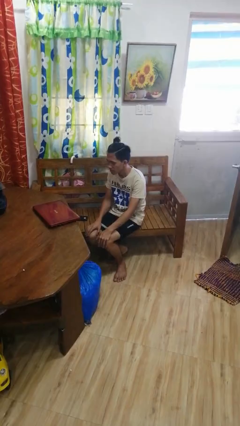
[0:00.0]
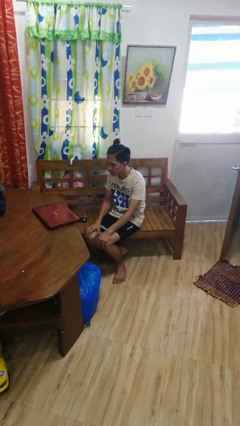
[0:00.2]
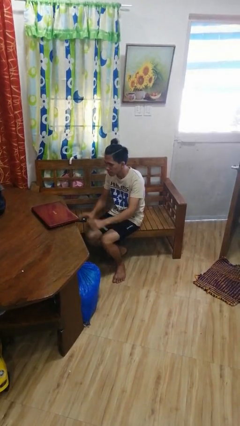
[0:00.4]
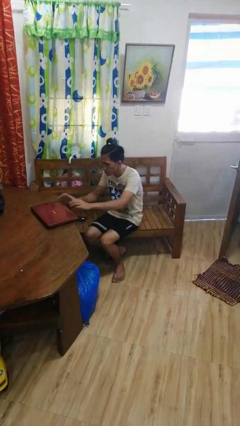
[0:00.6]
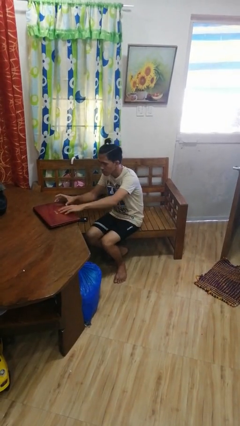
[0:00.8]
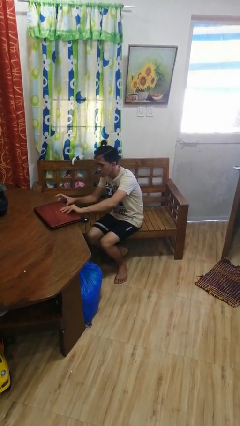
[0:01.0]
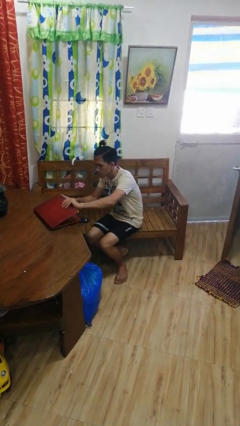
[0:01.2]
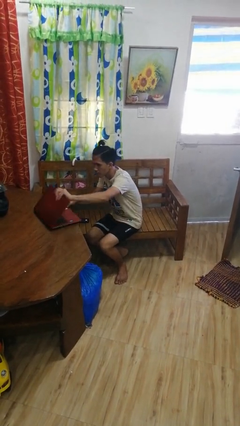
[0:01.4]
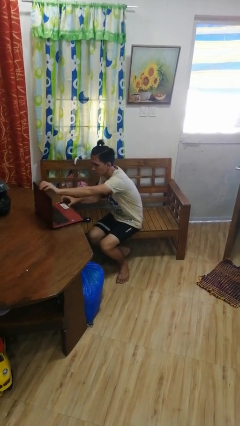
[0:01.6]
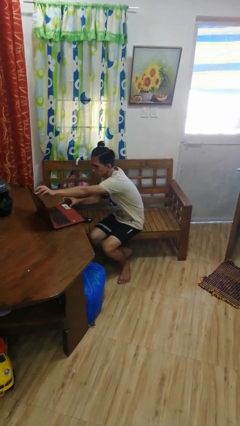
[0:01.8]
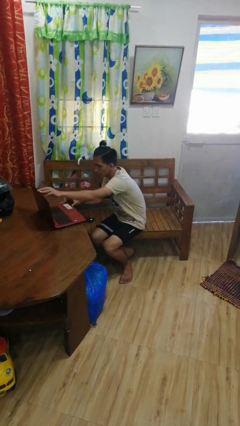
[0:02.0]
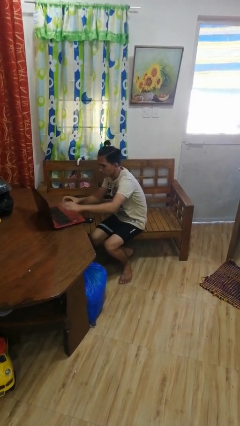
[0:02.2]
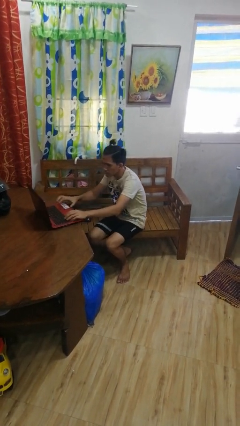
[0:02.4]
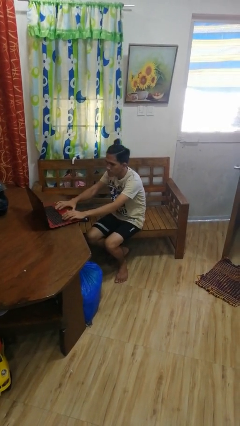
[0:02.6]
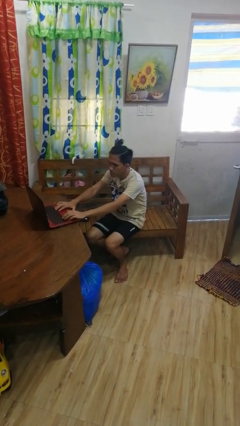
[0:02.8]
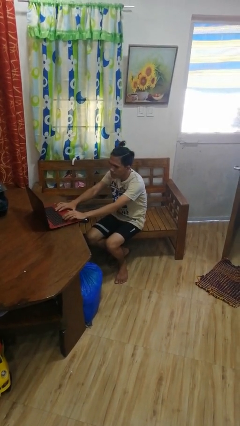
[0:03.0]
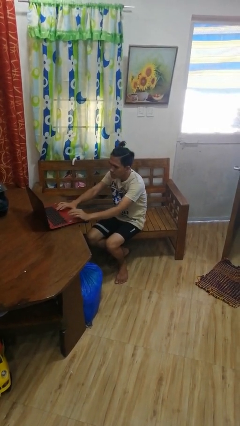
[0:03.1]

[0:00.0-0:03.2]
person opens laptop

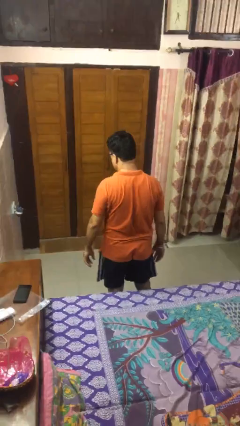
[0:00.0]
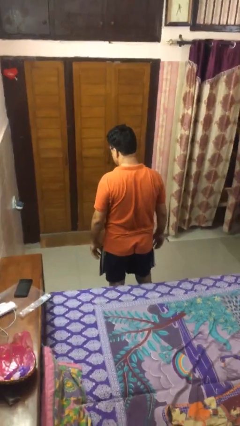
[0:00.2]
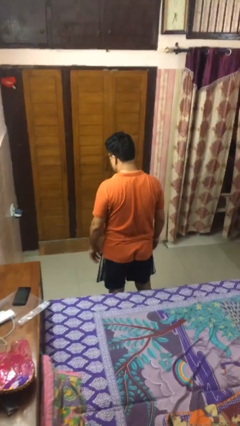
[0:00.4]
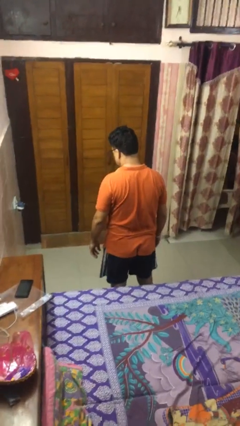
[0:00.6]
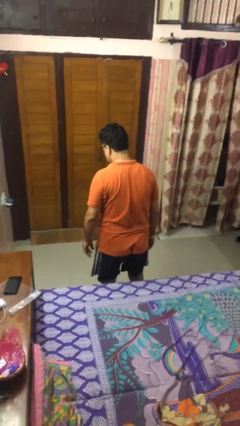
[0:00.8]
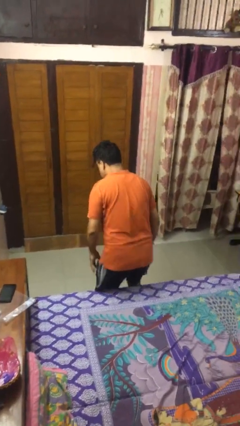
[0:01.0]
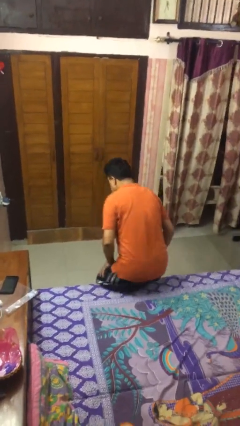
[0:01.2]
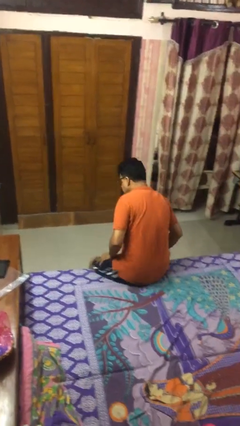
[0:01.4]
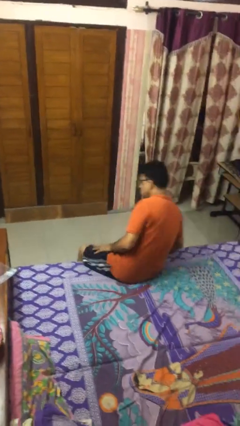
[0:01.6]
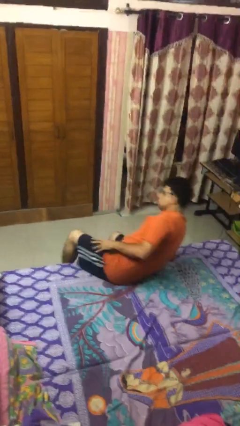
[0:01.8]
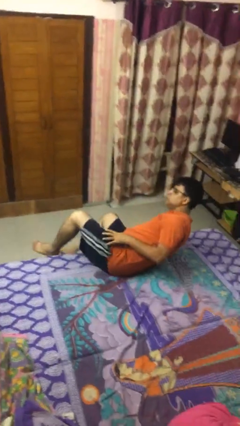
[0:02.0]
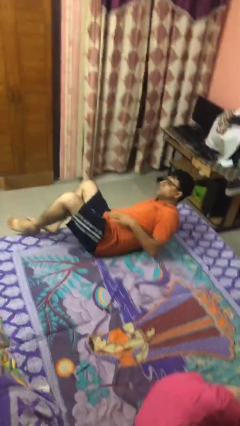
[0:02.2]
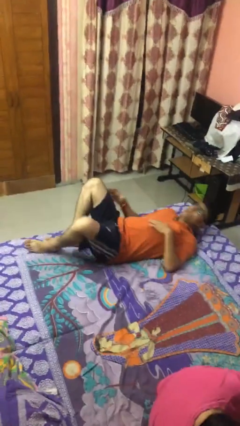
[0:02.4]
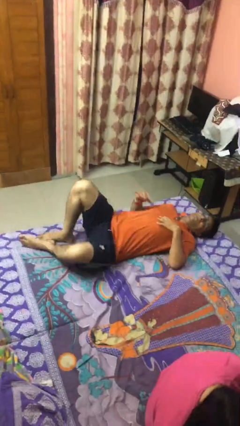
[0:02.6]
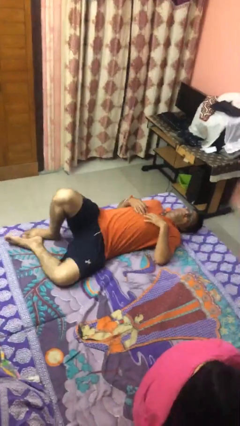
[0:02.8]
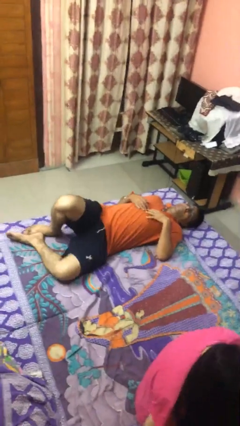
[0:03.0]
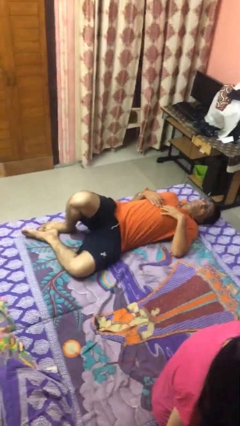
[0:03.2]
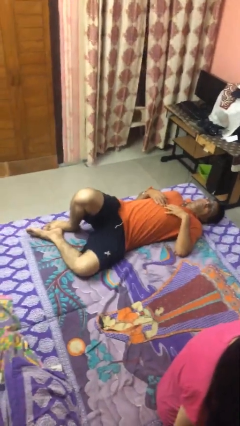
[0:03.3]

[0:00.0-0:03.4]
person lies down on bed

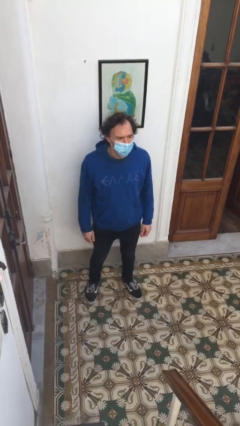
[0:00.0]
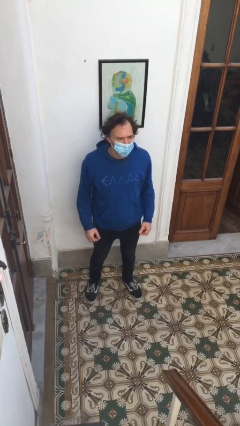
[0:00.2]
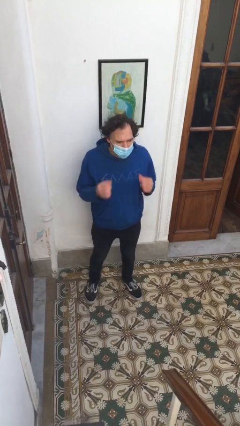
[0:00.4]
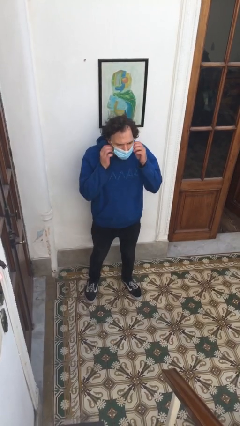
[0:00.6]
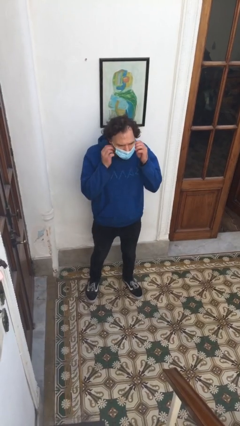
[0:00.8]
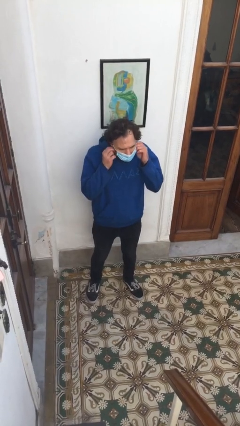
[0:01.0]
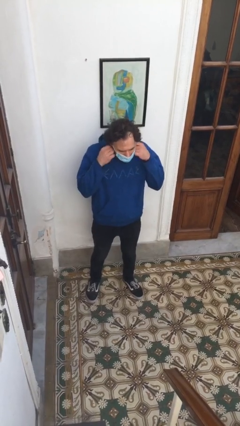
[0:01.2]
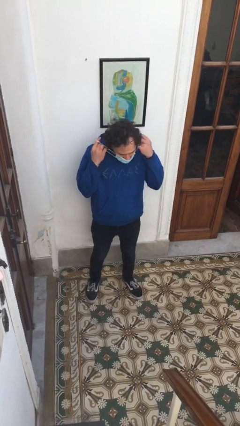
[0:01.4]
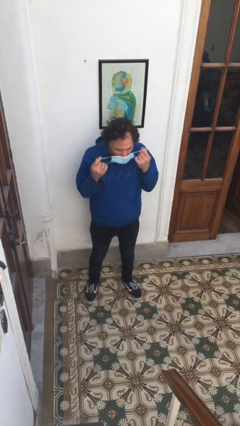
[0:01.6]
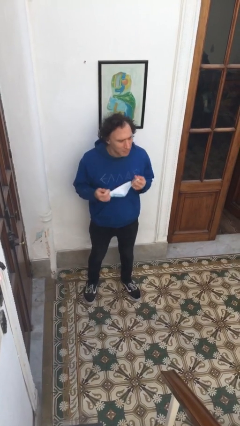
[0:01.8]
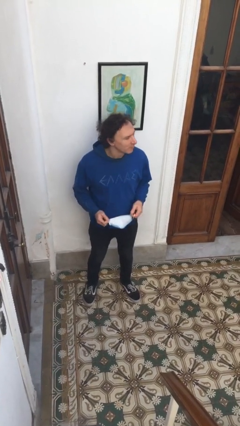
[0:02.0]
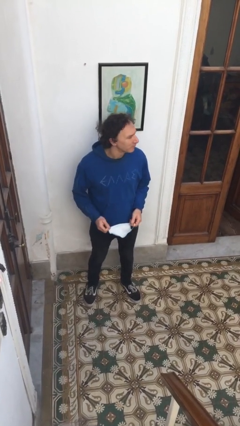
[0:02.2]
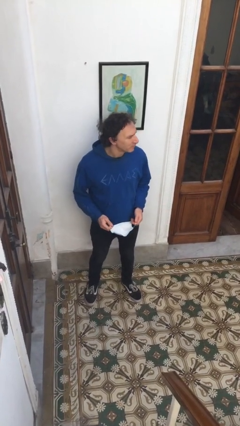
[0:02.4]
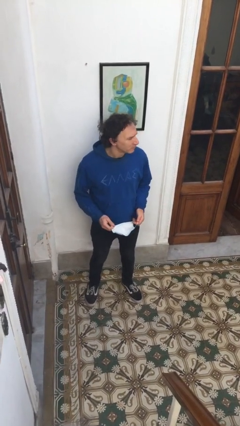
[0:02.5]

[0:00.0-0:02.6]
person takes off facemask

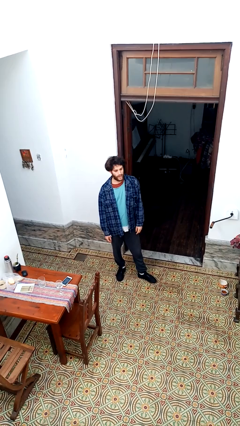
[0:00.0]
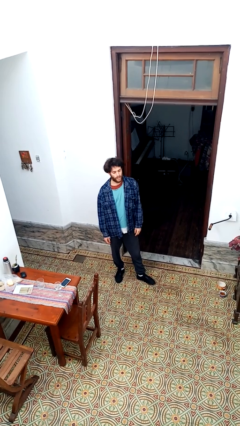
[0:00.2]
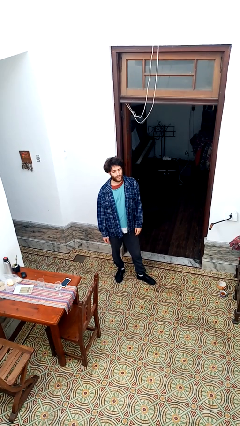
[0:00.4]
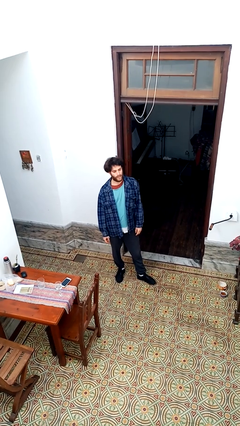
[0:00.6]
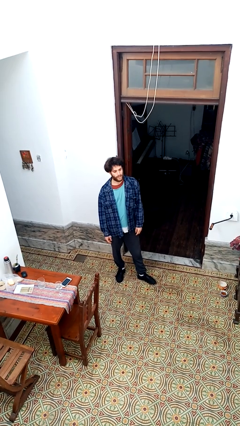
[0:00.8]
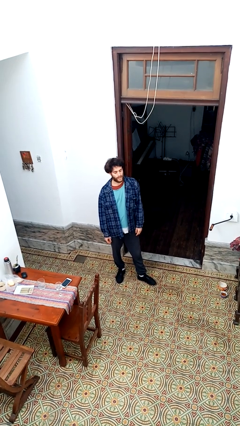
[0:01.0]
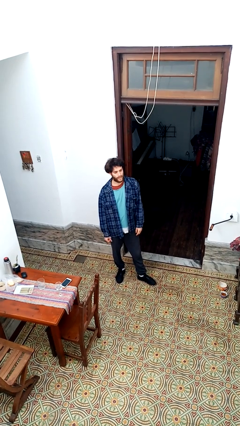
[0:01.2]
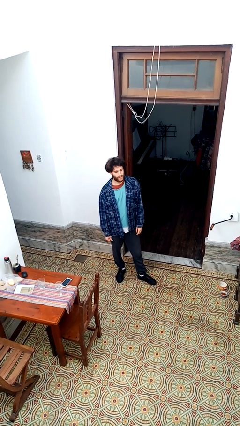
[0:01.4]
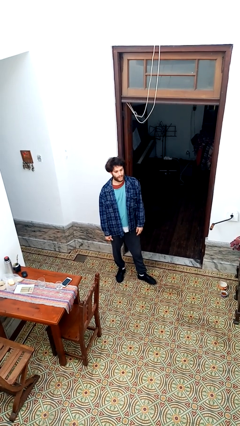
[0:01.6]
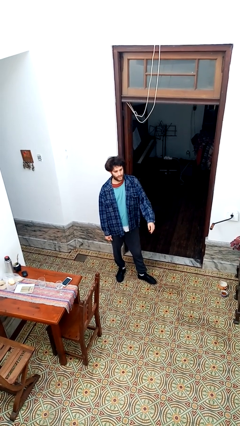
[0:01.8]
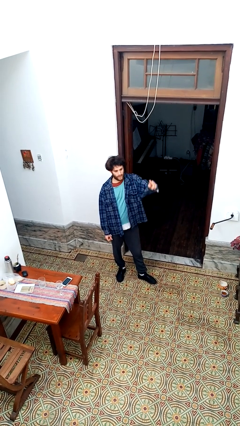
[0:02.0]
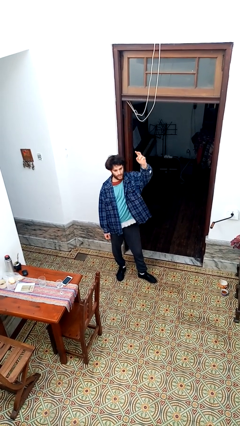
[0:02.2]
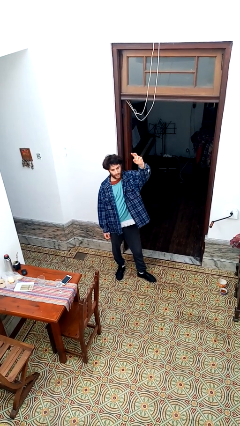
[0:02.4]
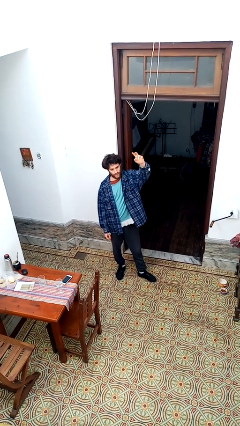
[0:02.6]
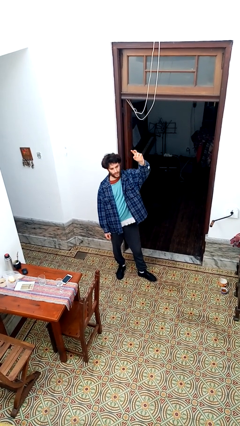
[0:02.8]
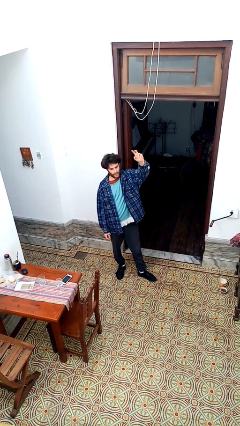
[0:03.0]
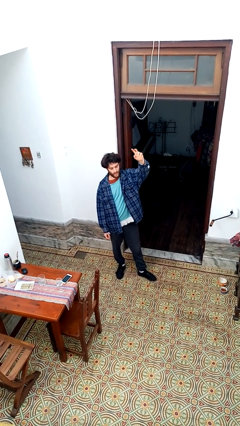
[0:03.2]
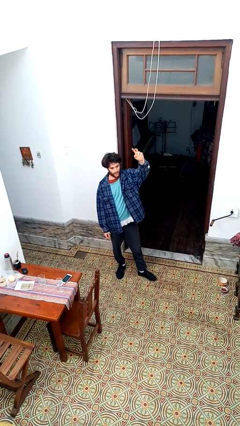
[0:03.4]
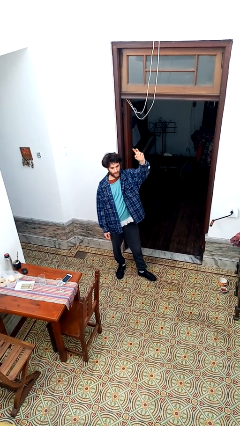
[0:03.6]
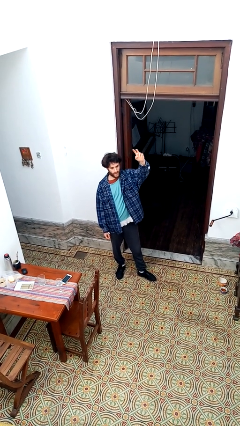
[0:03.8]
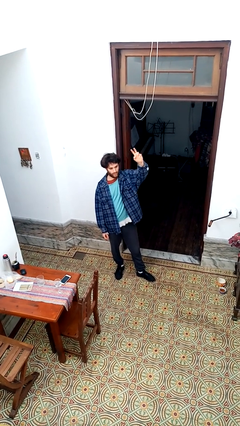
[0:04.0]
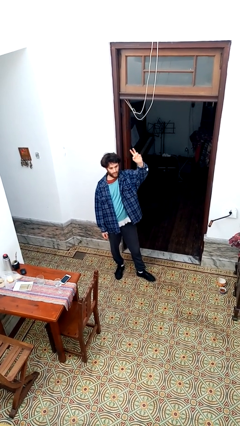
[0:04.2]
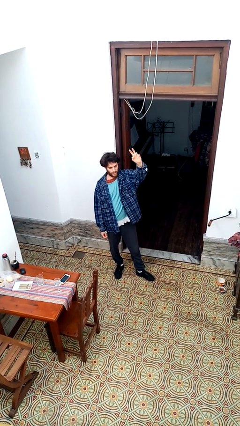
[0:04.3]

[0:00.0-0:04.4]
person gestures raise hand

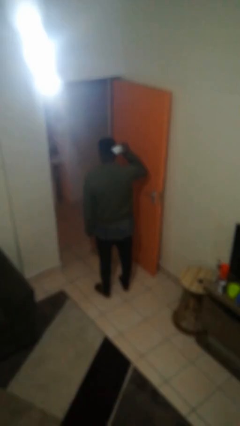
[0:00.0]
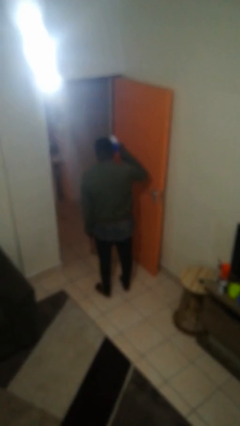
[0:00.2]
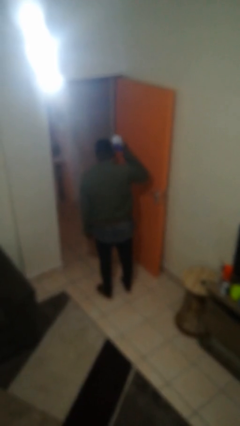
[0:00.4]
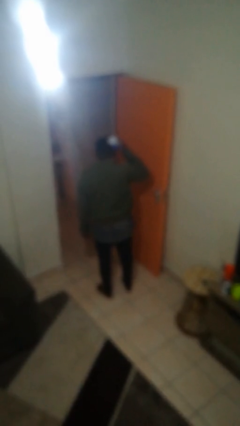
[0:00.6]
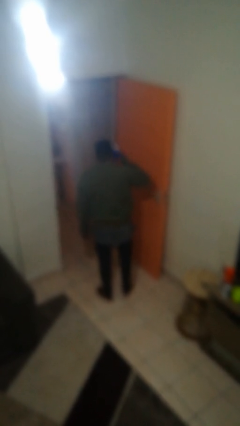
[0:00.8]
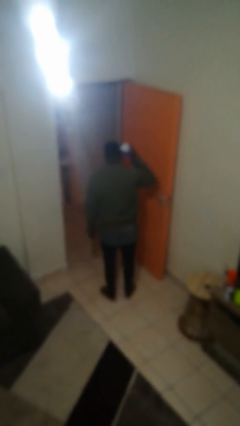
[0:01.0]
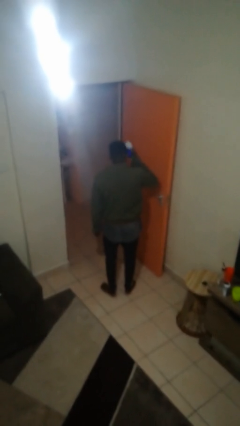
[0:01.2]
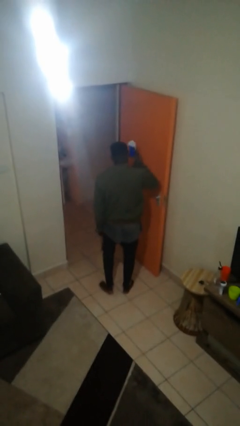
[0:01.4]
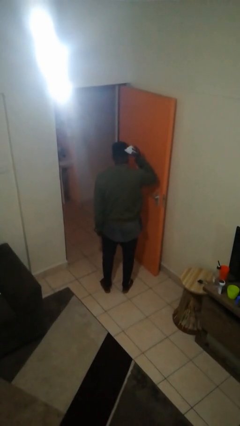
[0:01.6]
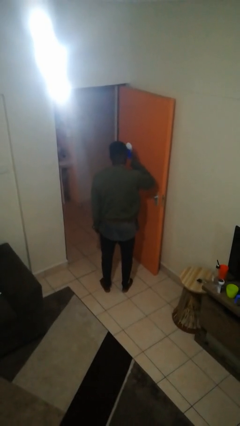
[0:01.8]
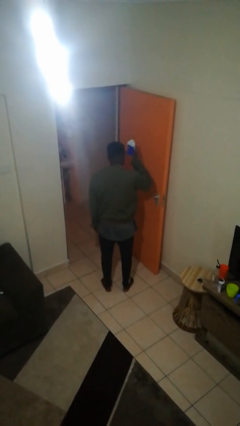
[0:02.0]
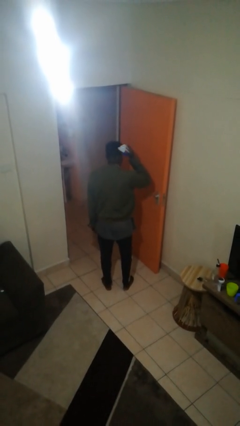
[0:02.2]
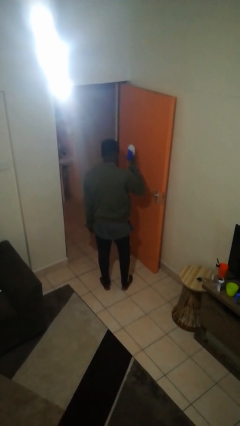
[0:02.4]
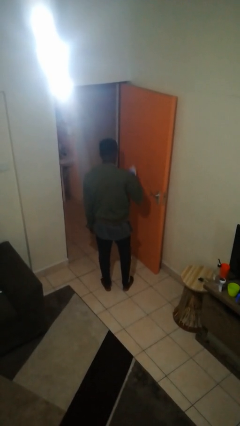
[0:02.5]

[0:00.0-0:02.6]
person brushes hair

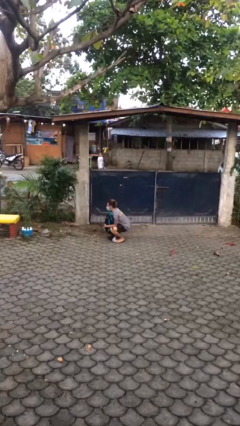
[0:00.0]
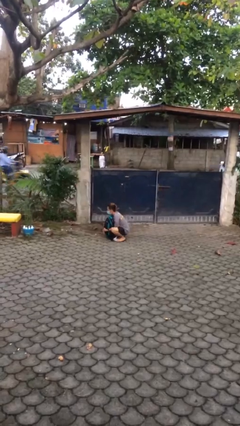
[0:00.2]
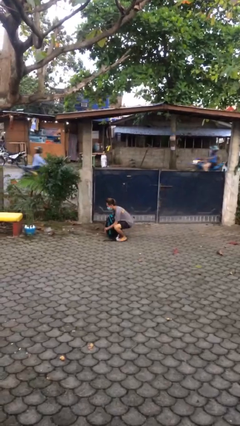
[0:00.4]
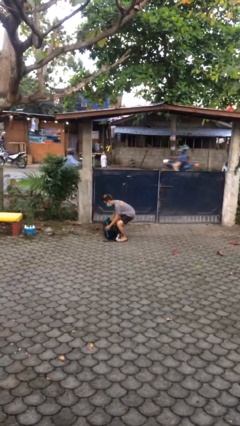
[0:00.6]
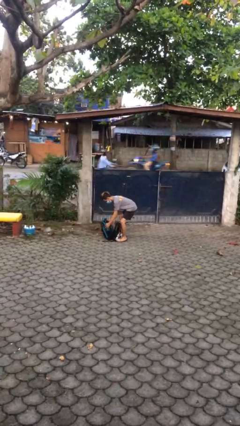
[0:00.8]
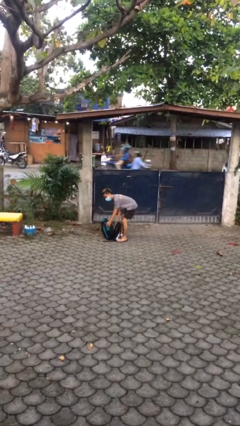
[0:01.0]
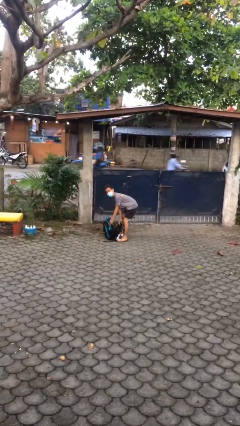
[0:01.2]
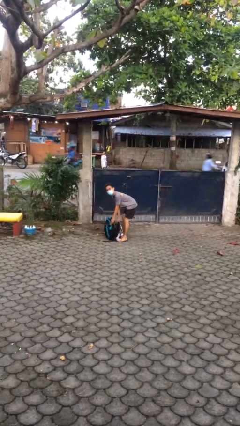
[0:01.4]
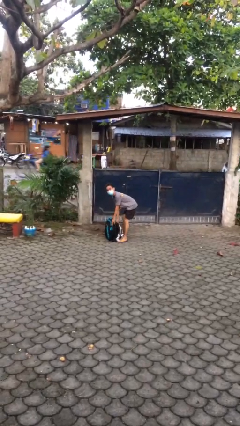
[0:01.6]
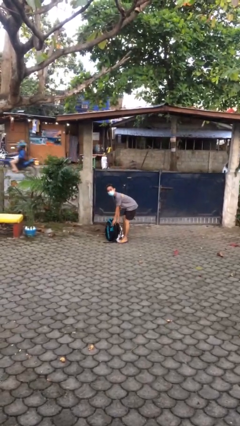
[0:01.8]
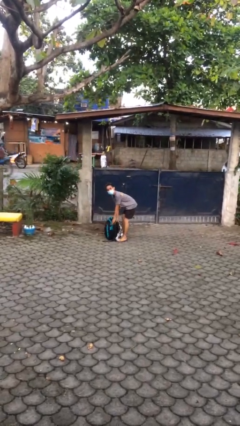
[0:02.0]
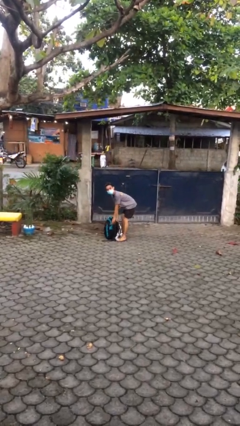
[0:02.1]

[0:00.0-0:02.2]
person puts down object on floor
